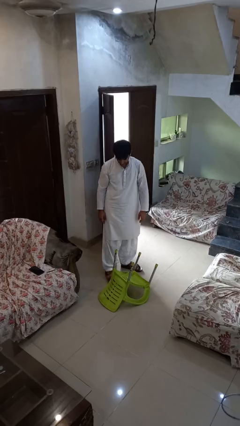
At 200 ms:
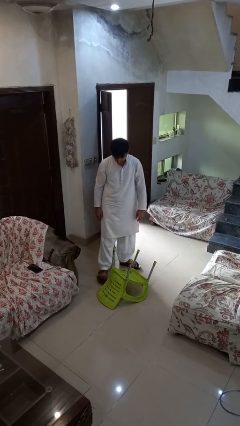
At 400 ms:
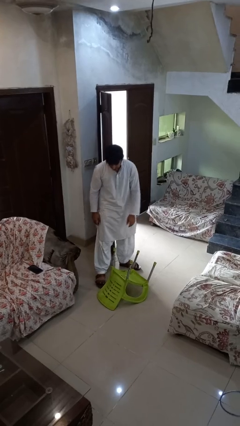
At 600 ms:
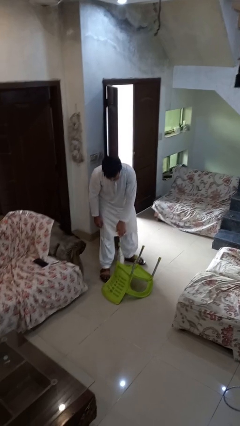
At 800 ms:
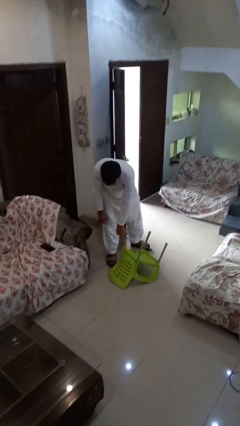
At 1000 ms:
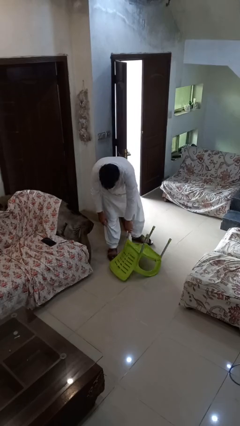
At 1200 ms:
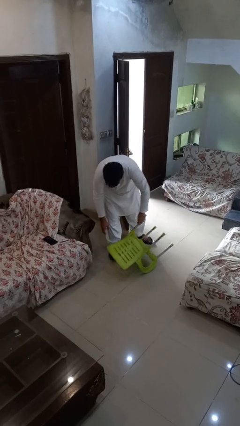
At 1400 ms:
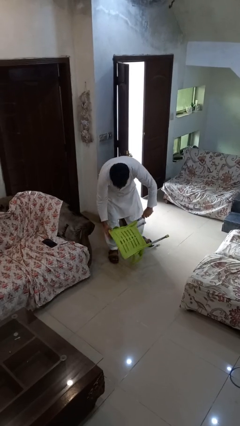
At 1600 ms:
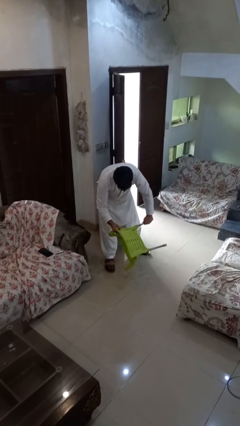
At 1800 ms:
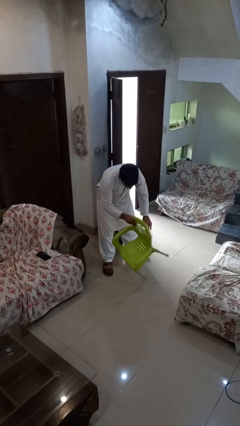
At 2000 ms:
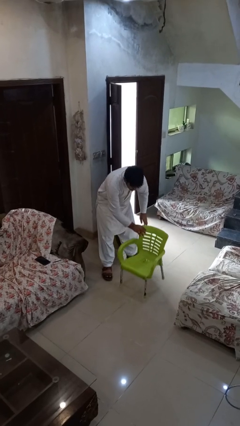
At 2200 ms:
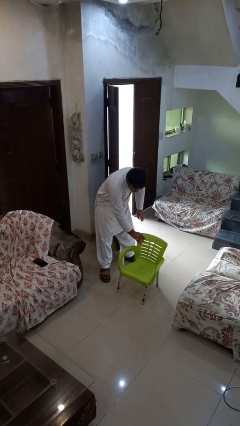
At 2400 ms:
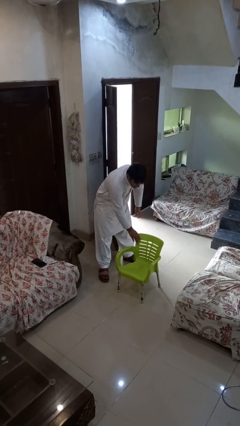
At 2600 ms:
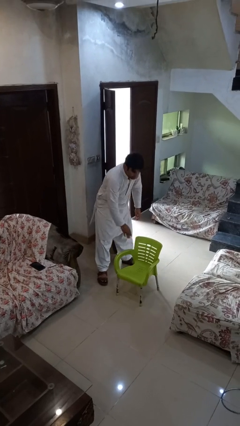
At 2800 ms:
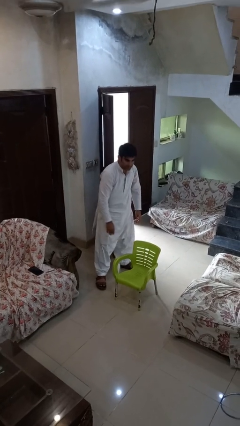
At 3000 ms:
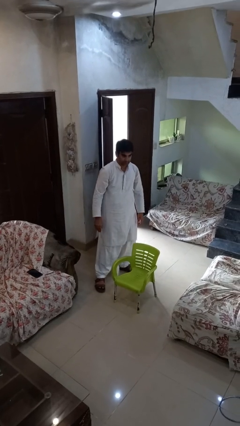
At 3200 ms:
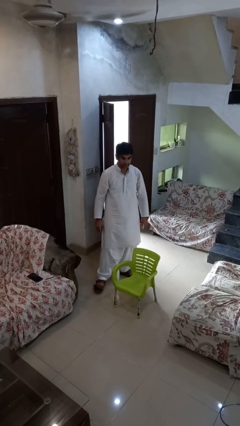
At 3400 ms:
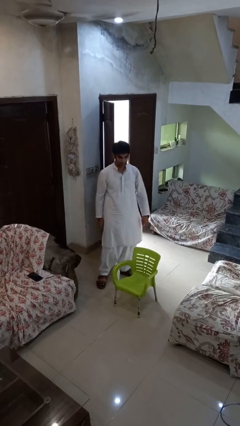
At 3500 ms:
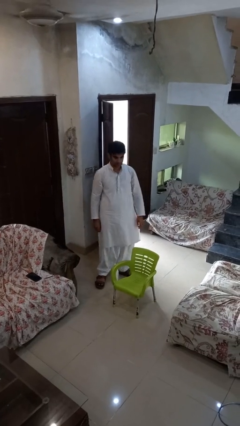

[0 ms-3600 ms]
person sets upright furniture

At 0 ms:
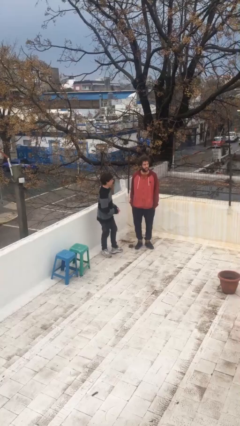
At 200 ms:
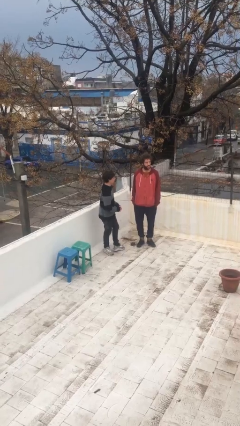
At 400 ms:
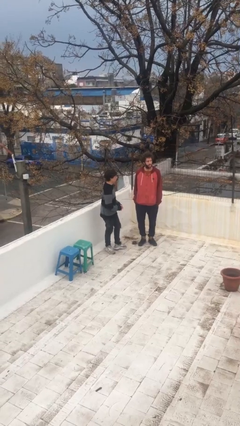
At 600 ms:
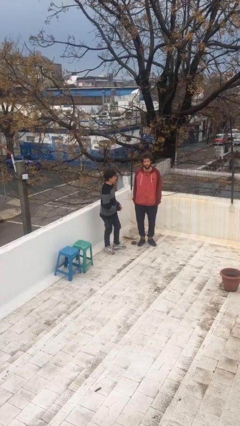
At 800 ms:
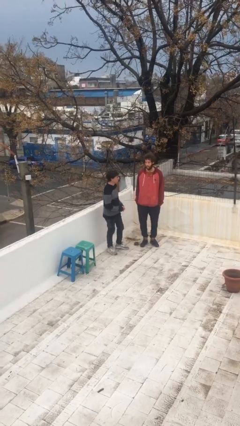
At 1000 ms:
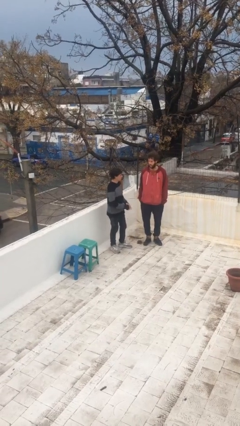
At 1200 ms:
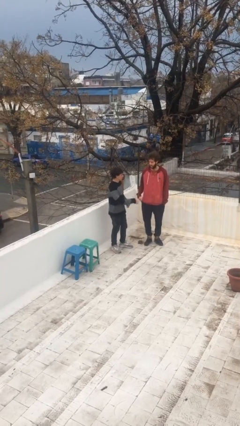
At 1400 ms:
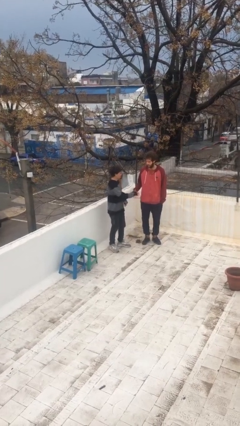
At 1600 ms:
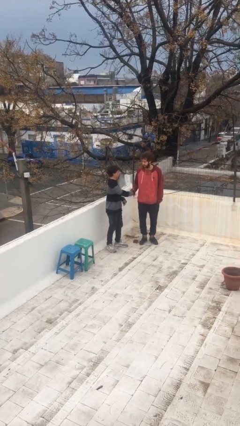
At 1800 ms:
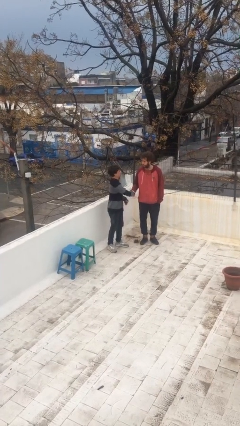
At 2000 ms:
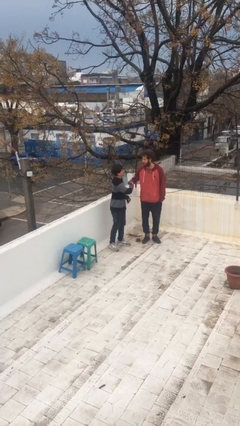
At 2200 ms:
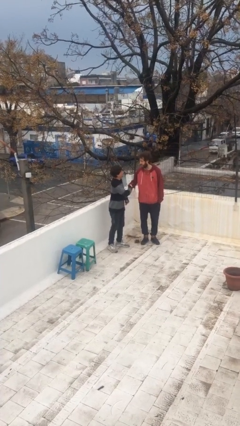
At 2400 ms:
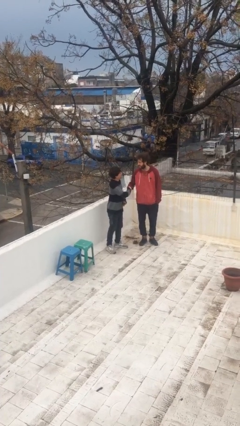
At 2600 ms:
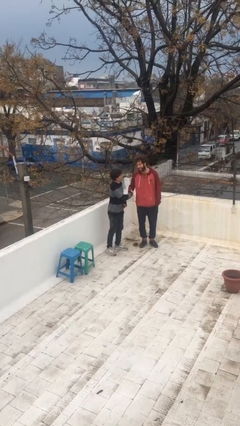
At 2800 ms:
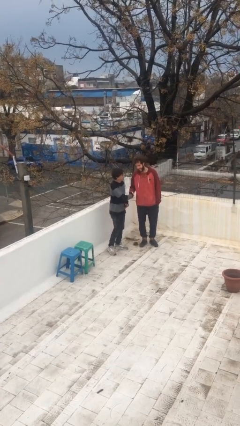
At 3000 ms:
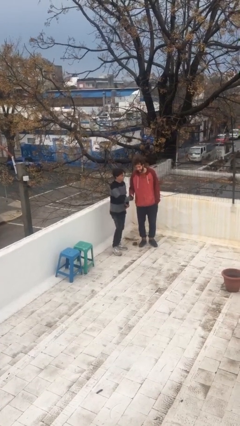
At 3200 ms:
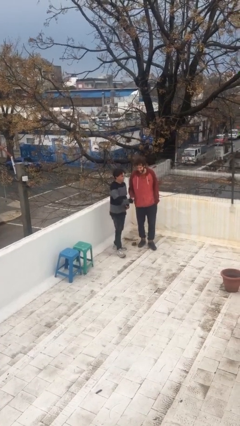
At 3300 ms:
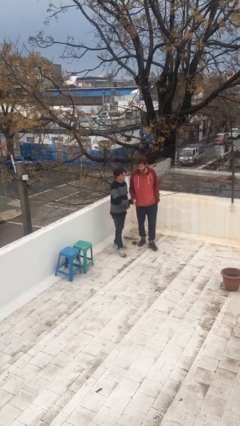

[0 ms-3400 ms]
person shakes hand

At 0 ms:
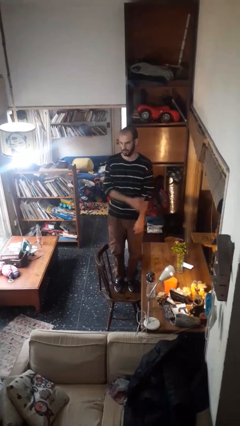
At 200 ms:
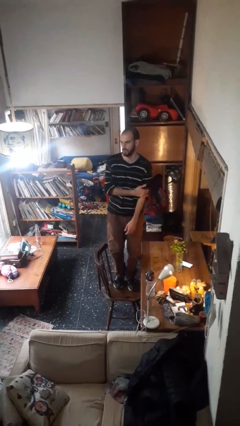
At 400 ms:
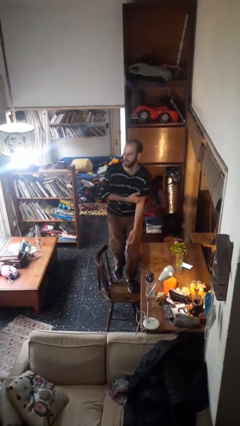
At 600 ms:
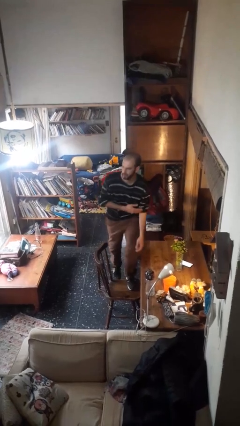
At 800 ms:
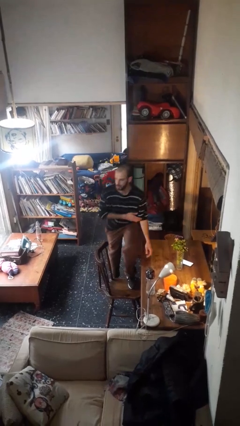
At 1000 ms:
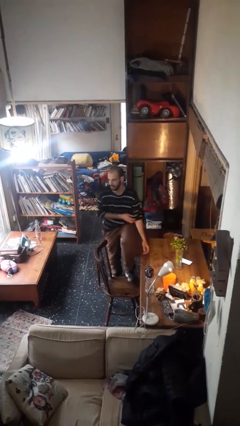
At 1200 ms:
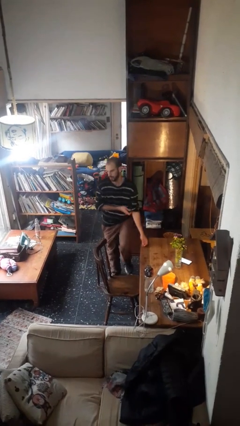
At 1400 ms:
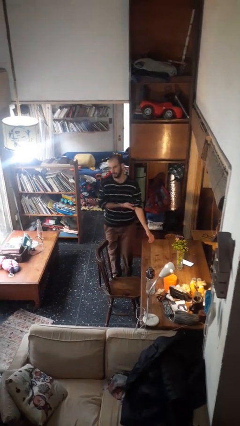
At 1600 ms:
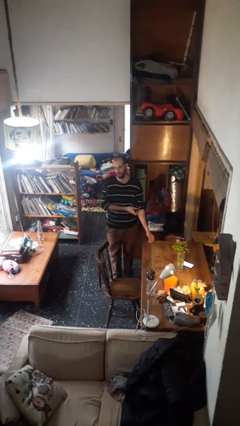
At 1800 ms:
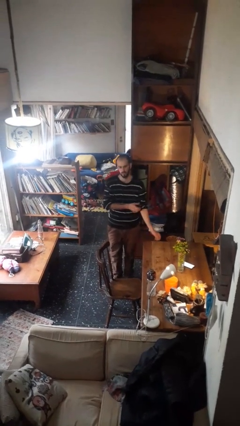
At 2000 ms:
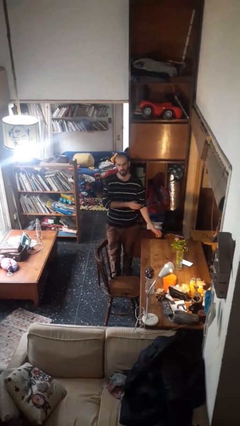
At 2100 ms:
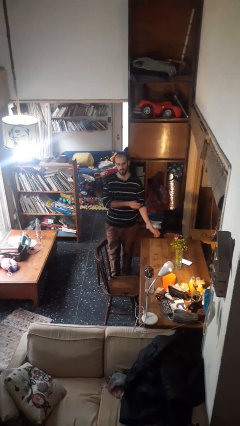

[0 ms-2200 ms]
person climbs off chair

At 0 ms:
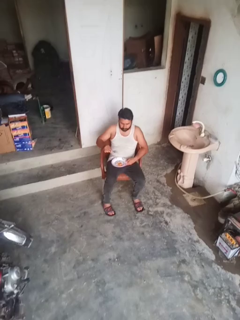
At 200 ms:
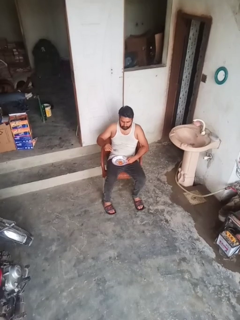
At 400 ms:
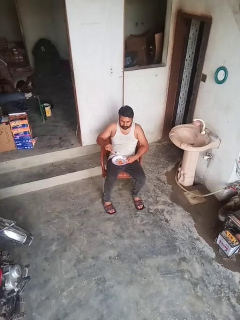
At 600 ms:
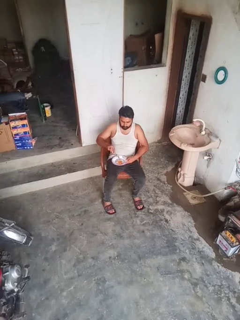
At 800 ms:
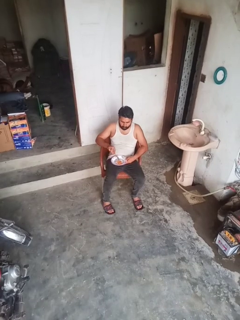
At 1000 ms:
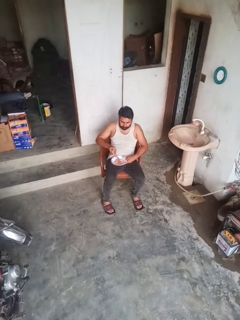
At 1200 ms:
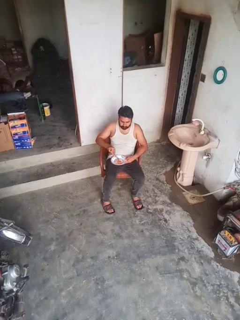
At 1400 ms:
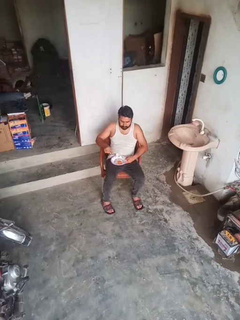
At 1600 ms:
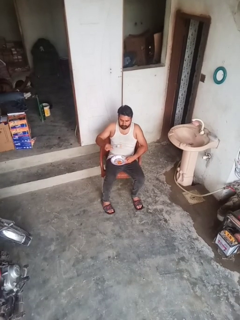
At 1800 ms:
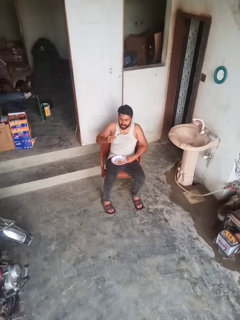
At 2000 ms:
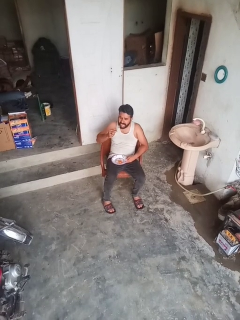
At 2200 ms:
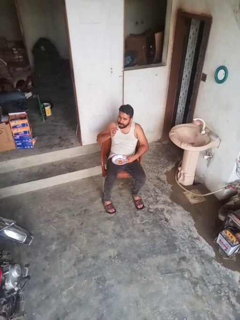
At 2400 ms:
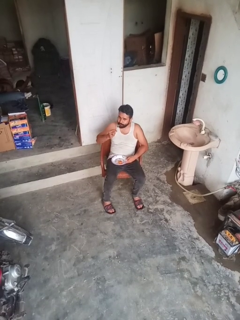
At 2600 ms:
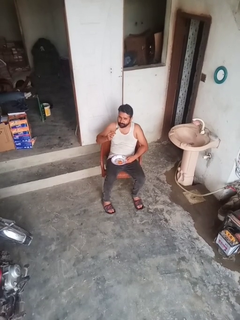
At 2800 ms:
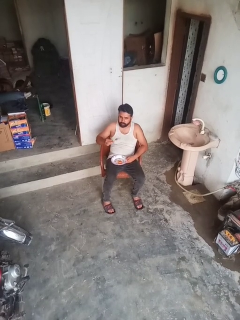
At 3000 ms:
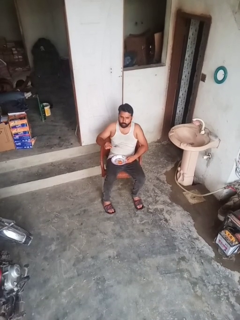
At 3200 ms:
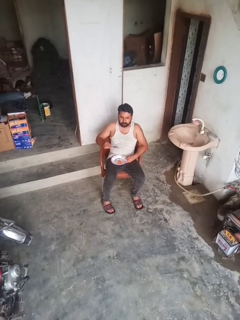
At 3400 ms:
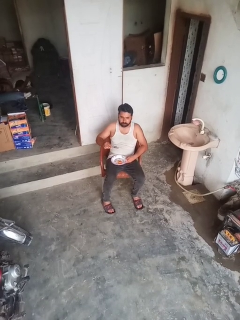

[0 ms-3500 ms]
person eats with utensil

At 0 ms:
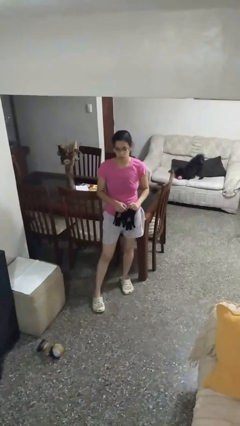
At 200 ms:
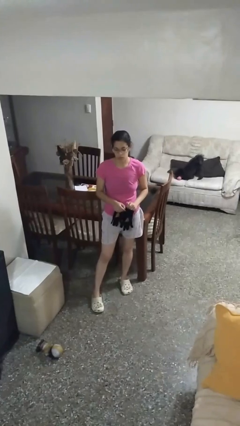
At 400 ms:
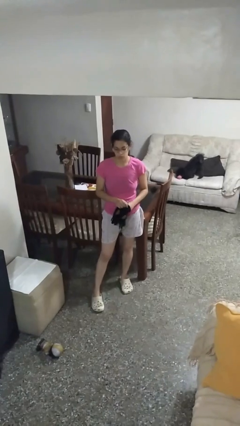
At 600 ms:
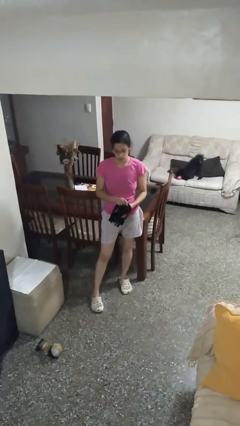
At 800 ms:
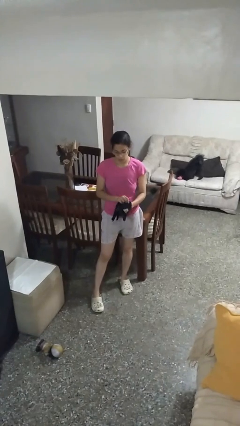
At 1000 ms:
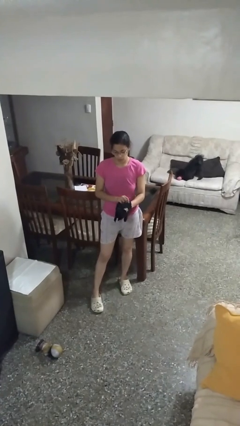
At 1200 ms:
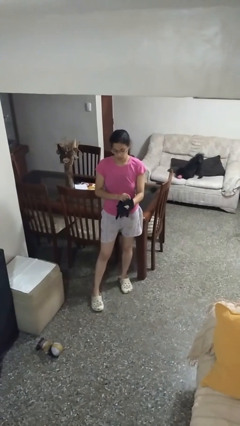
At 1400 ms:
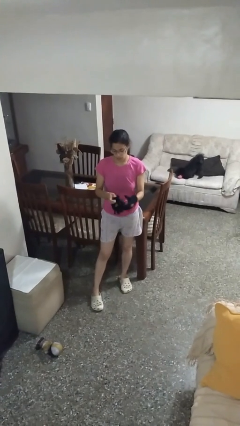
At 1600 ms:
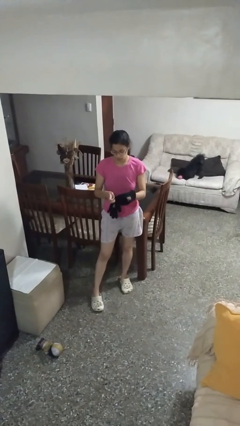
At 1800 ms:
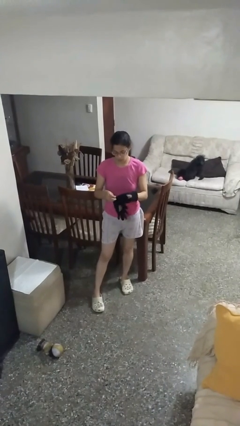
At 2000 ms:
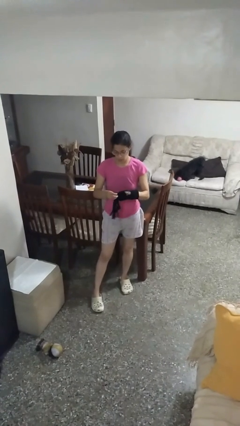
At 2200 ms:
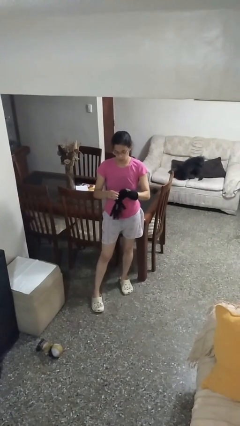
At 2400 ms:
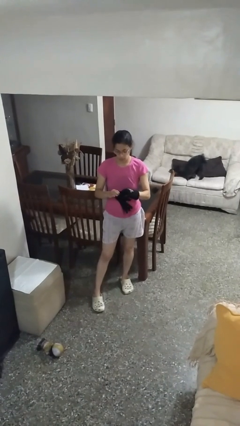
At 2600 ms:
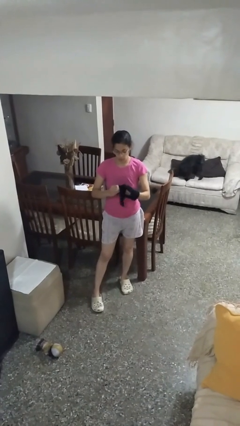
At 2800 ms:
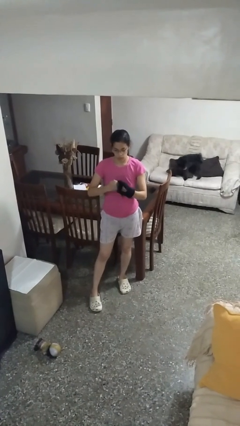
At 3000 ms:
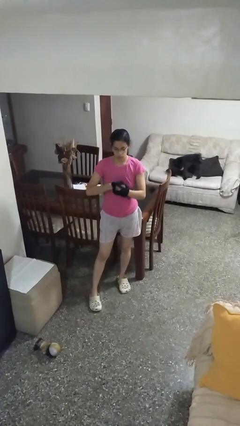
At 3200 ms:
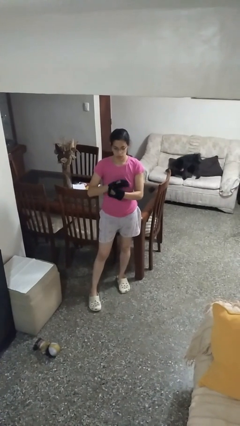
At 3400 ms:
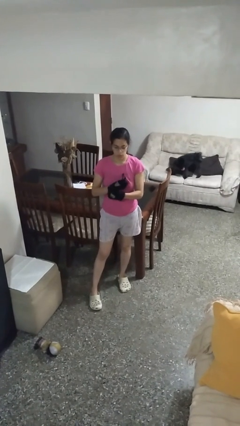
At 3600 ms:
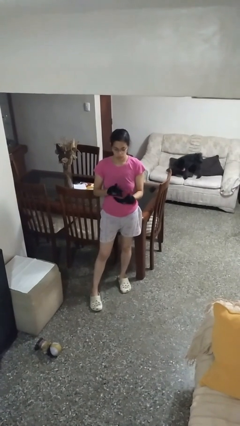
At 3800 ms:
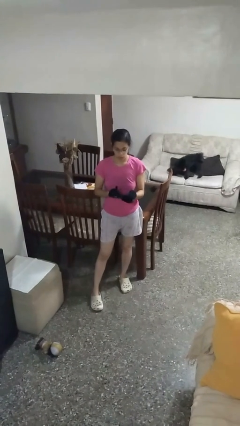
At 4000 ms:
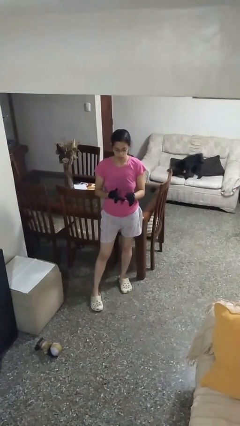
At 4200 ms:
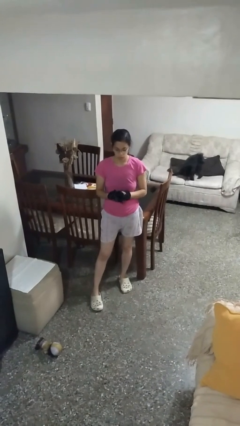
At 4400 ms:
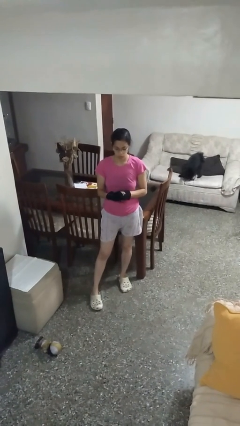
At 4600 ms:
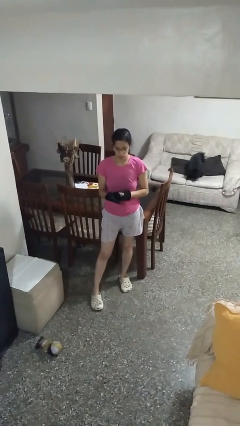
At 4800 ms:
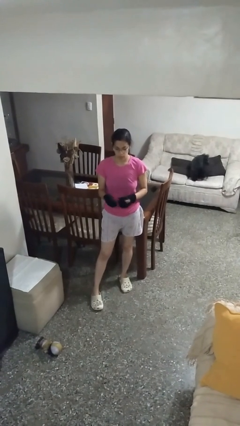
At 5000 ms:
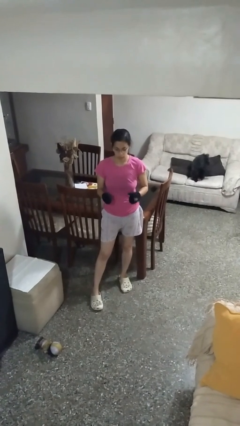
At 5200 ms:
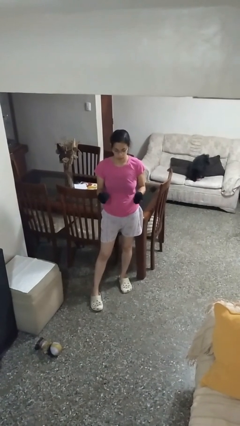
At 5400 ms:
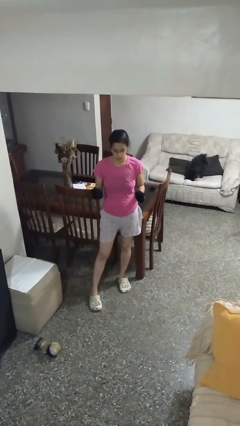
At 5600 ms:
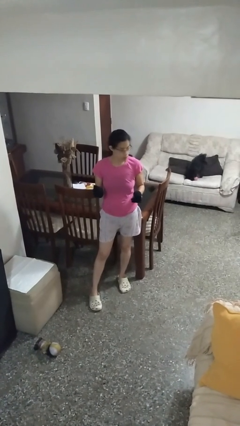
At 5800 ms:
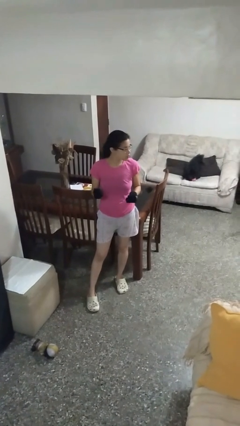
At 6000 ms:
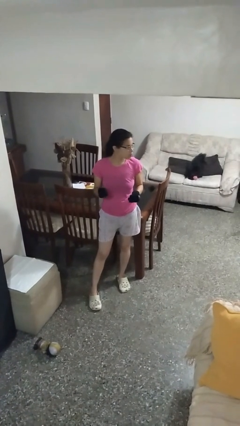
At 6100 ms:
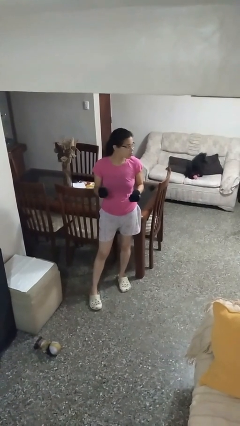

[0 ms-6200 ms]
person puts on gloves

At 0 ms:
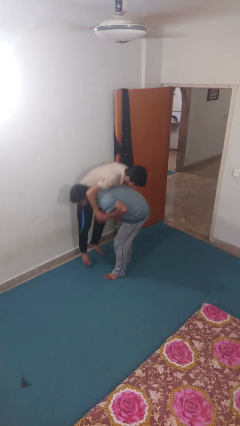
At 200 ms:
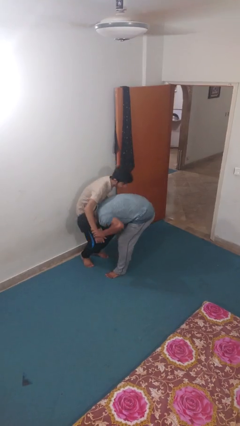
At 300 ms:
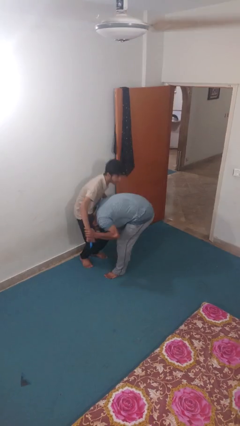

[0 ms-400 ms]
person puts down person
